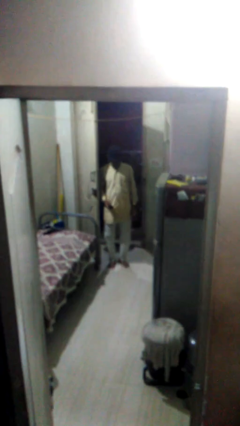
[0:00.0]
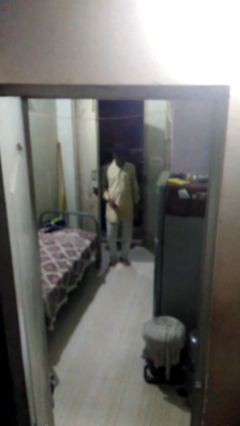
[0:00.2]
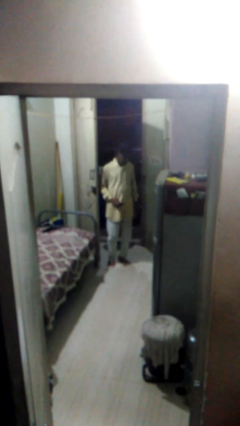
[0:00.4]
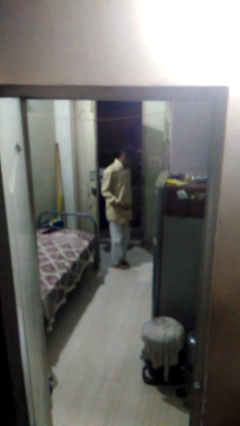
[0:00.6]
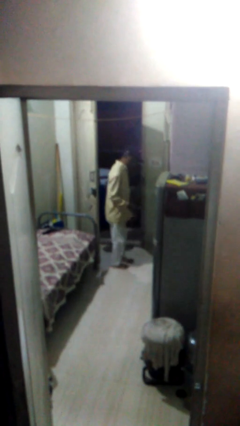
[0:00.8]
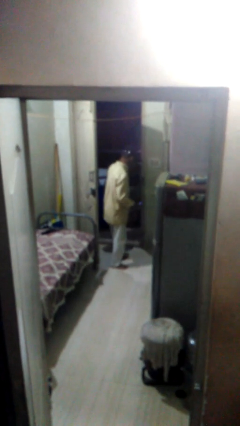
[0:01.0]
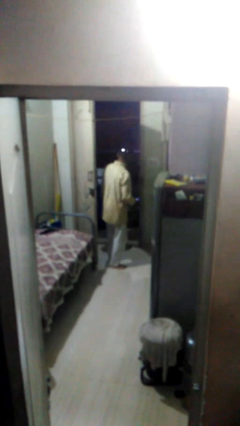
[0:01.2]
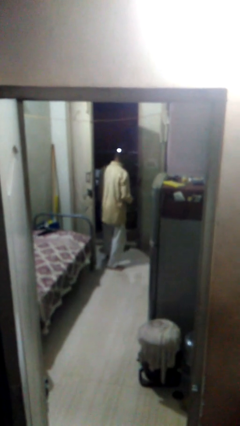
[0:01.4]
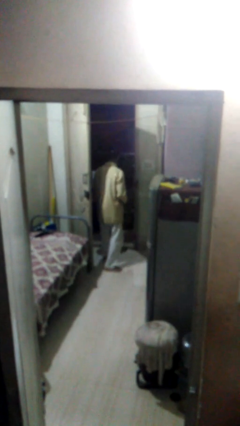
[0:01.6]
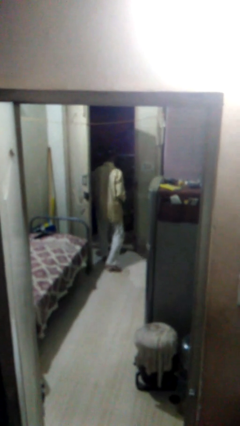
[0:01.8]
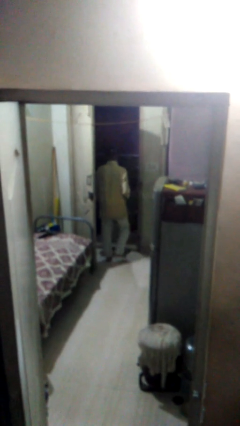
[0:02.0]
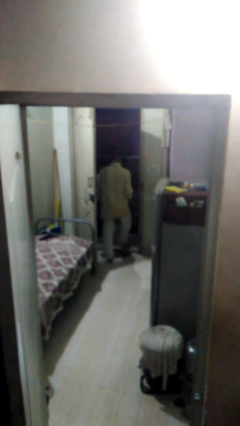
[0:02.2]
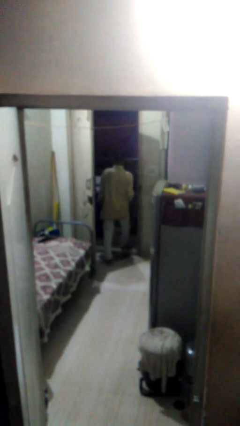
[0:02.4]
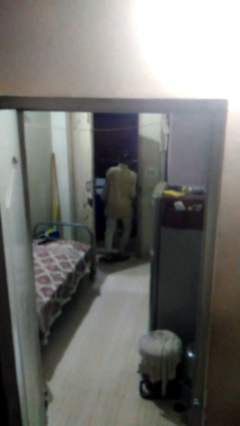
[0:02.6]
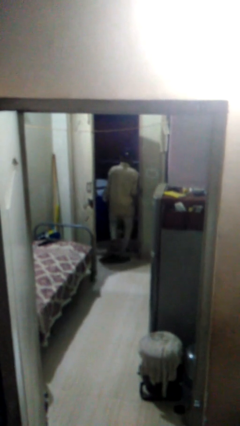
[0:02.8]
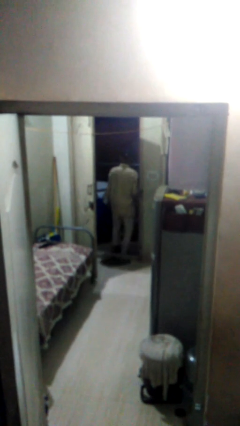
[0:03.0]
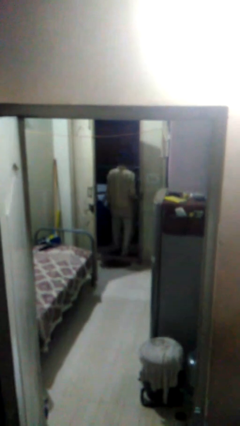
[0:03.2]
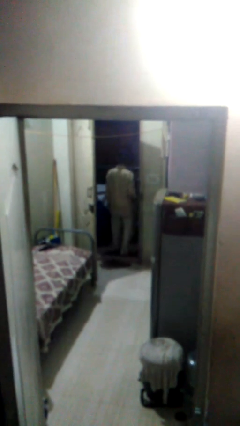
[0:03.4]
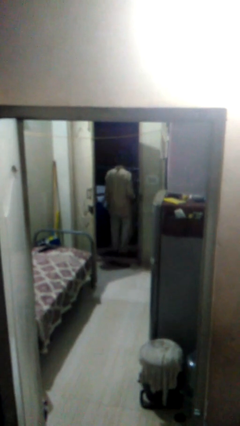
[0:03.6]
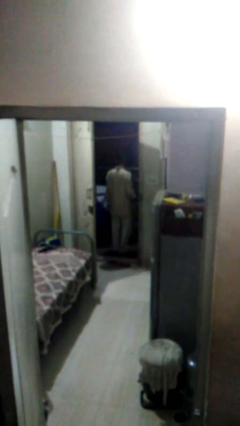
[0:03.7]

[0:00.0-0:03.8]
person exits scene through structure

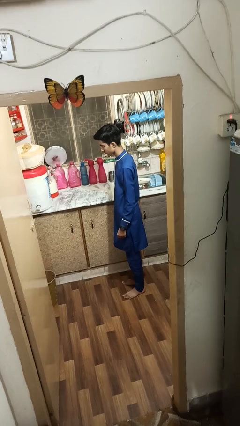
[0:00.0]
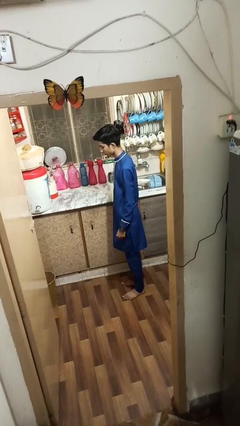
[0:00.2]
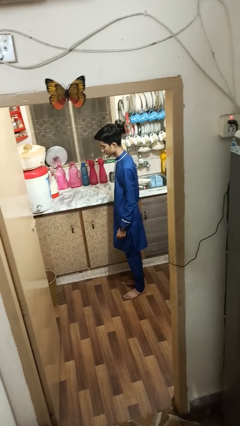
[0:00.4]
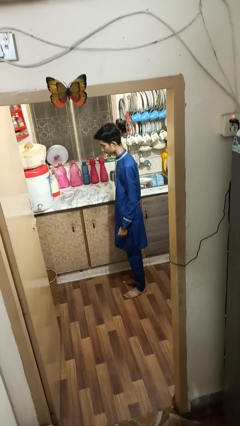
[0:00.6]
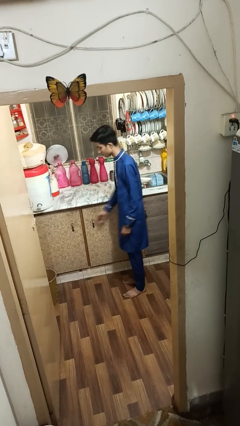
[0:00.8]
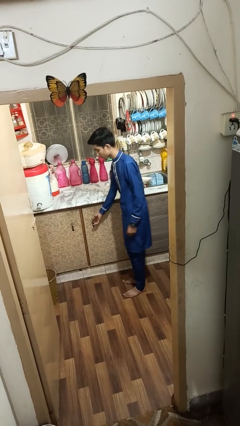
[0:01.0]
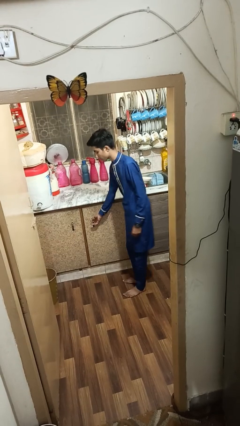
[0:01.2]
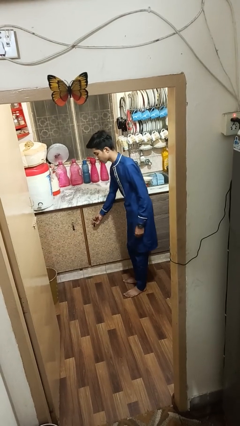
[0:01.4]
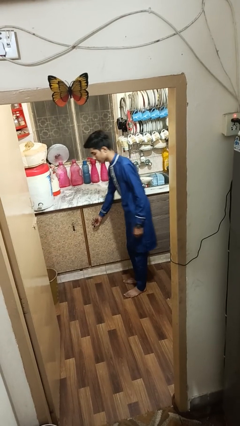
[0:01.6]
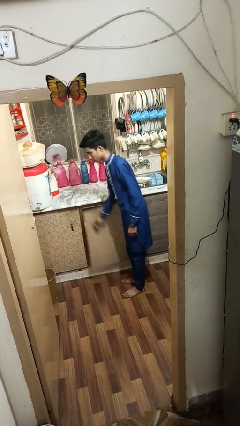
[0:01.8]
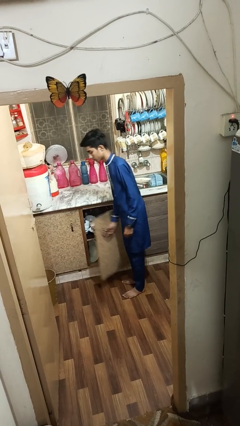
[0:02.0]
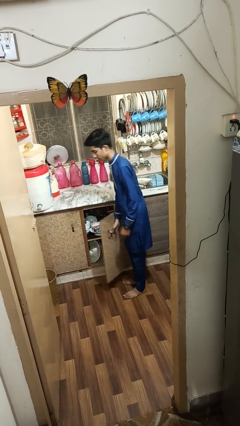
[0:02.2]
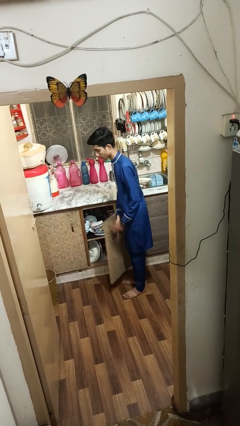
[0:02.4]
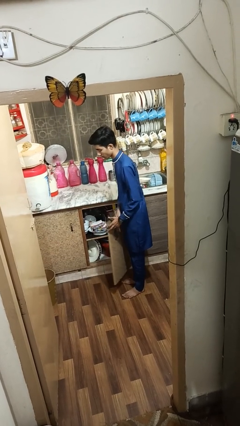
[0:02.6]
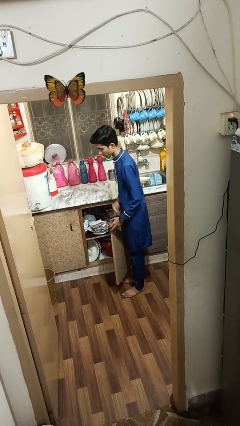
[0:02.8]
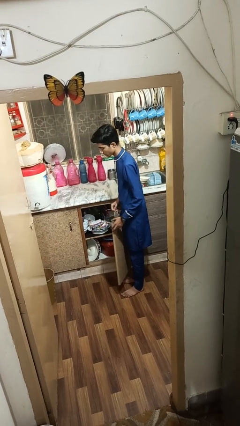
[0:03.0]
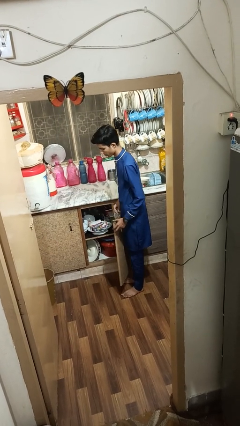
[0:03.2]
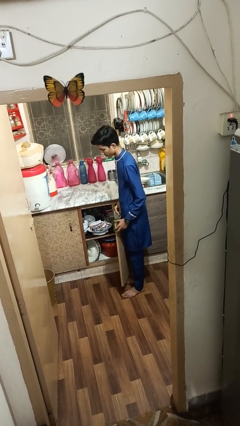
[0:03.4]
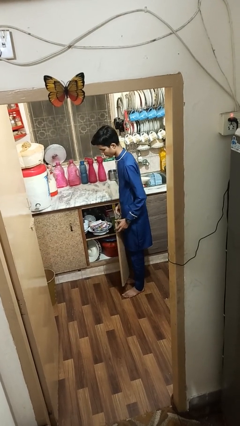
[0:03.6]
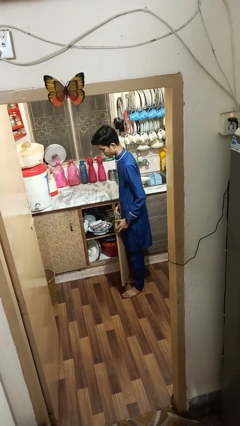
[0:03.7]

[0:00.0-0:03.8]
person opens cabinet

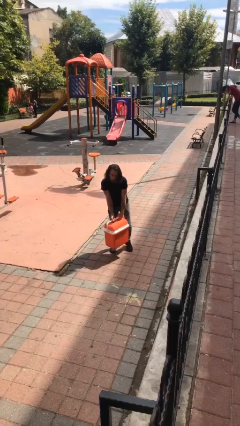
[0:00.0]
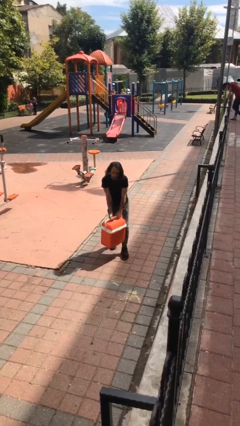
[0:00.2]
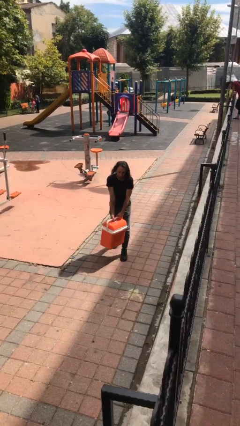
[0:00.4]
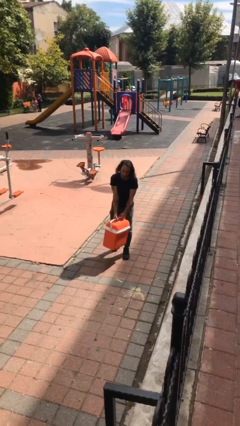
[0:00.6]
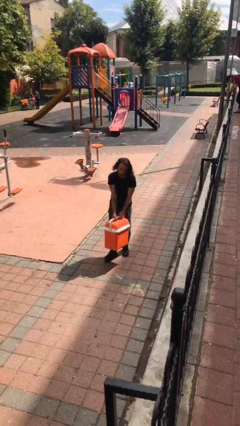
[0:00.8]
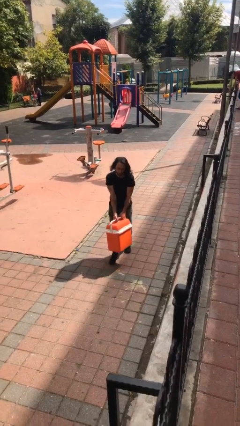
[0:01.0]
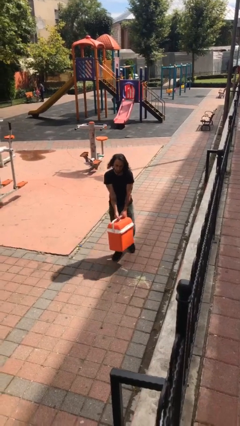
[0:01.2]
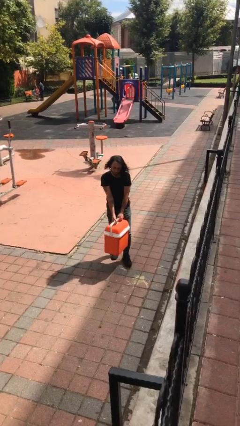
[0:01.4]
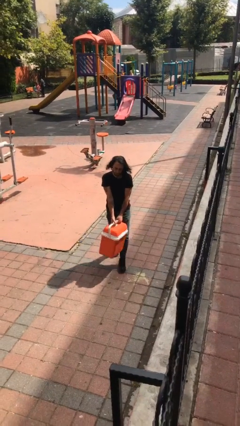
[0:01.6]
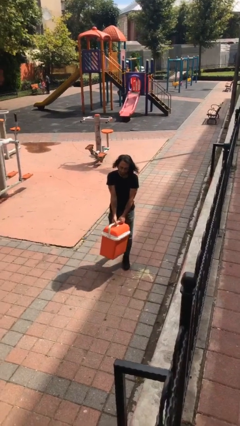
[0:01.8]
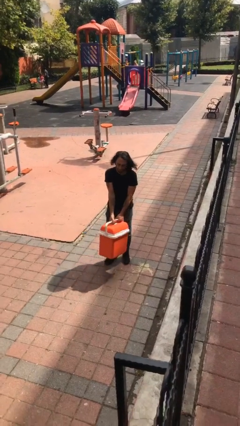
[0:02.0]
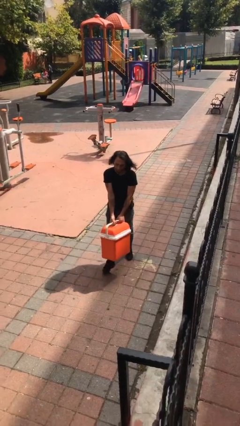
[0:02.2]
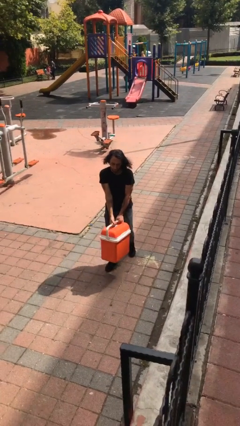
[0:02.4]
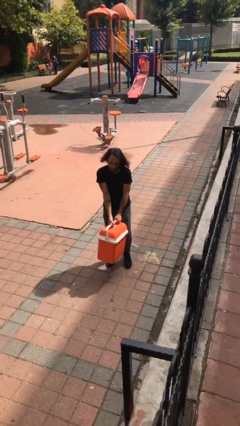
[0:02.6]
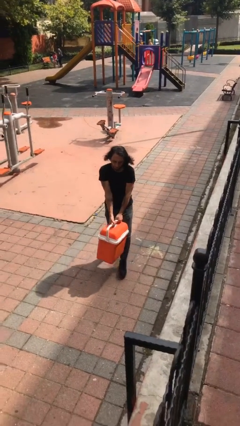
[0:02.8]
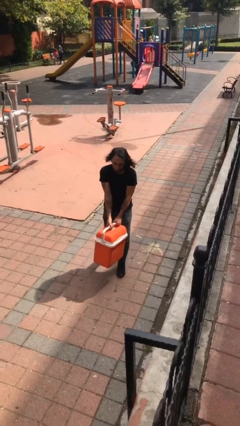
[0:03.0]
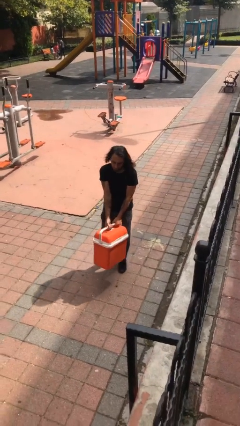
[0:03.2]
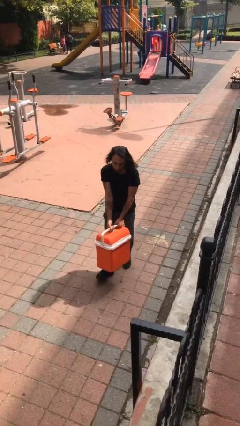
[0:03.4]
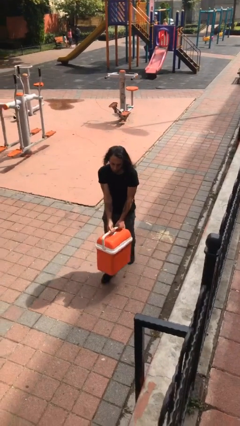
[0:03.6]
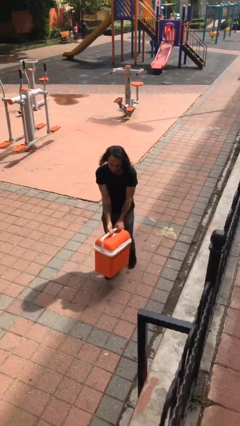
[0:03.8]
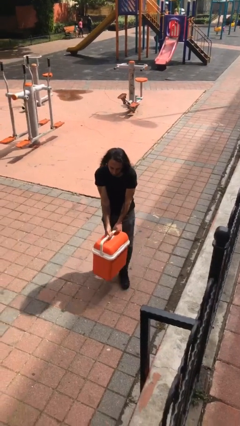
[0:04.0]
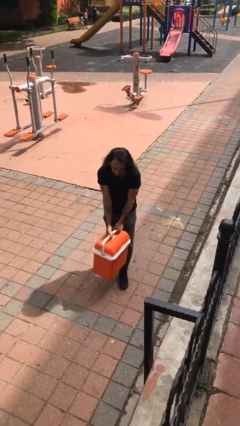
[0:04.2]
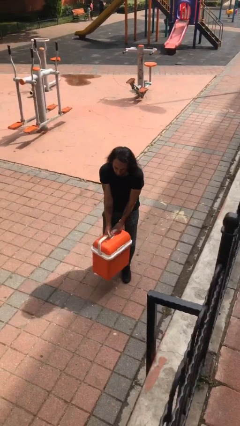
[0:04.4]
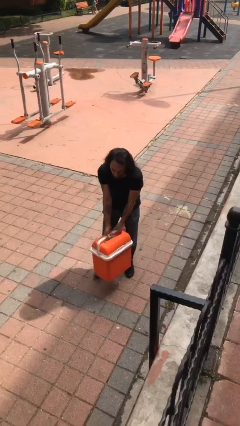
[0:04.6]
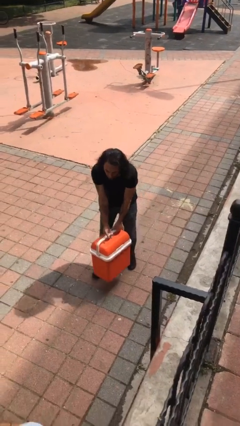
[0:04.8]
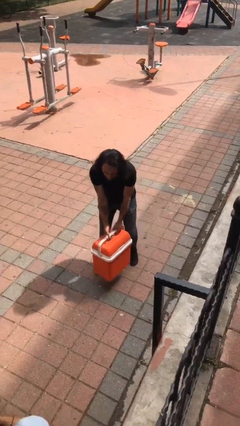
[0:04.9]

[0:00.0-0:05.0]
person carries heavy object

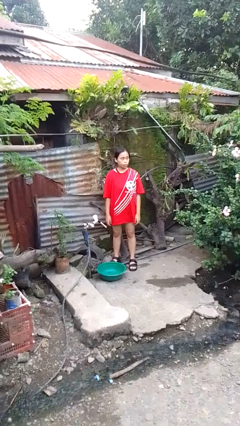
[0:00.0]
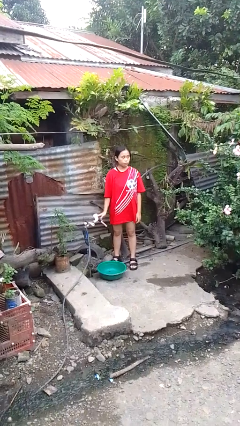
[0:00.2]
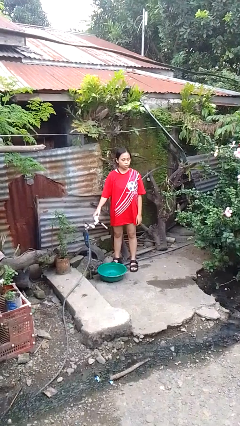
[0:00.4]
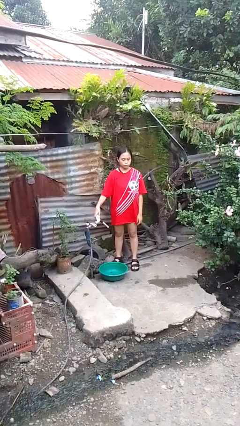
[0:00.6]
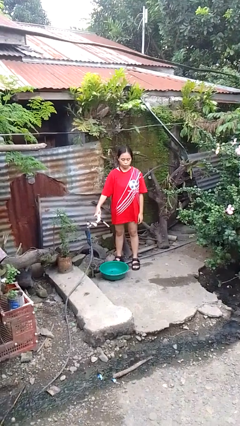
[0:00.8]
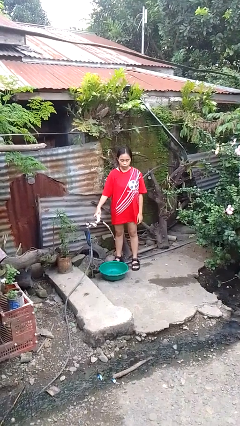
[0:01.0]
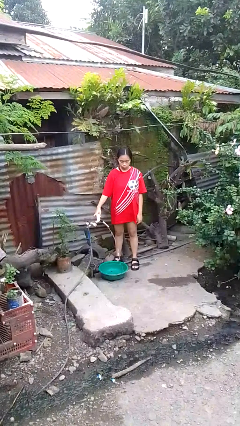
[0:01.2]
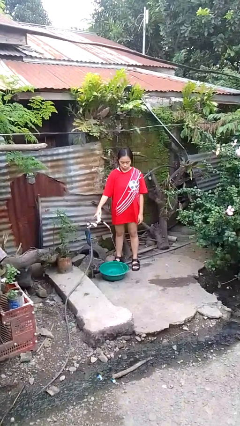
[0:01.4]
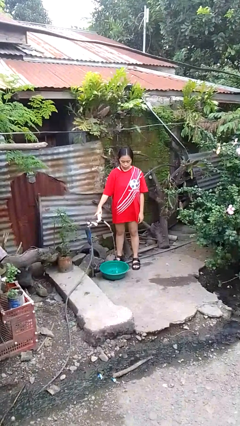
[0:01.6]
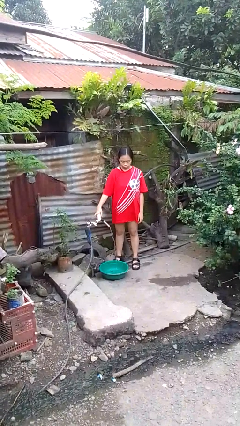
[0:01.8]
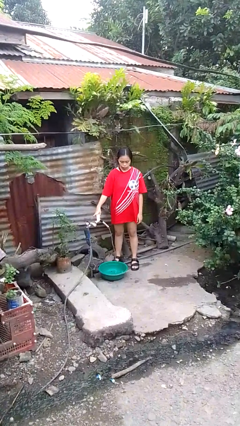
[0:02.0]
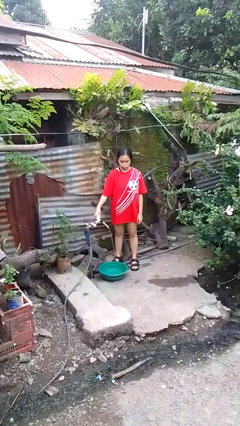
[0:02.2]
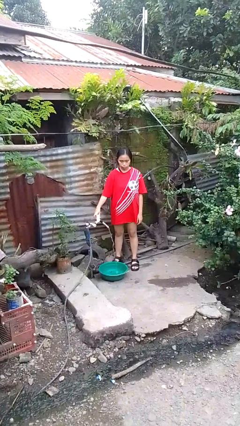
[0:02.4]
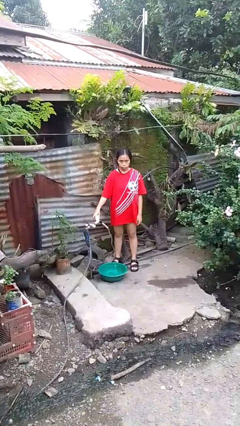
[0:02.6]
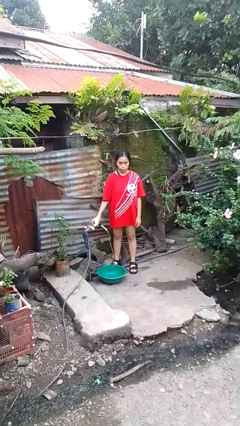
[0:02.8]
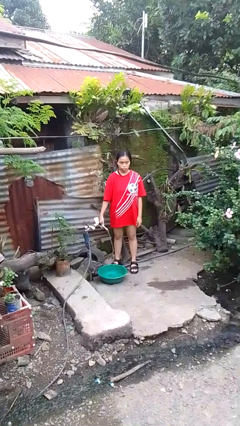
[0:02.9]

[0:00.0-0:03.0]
person turns on faucet

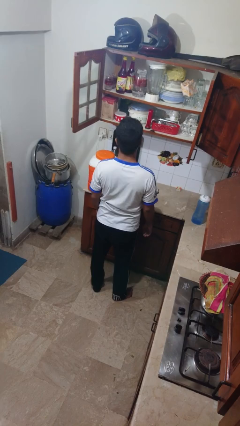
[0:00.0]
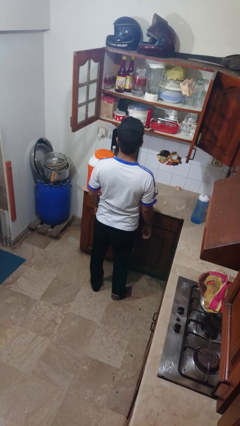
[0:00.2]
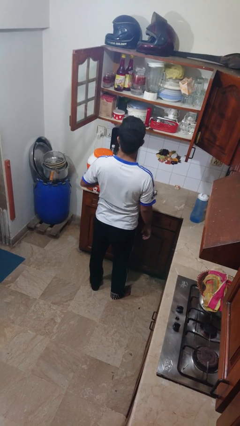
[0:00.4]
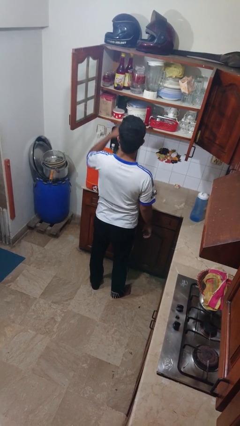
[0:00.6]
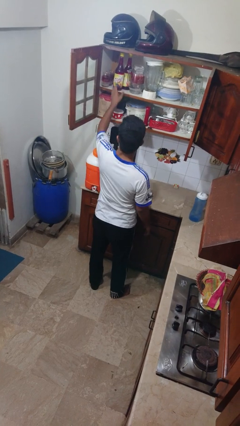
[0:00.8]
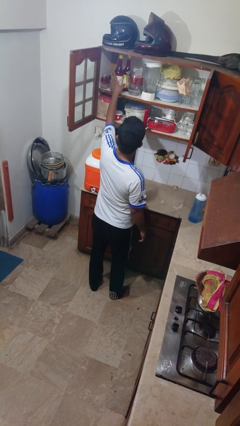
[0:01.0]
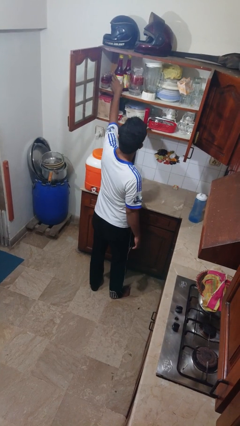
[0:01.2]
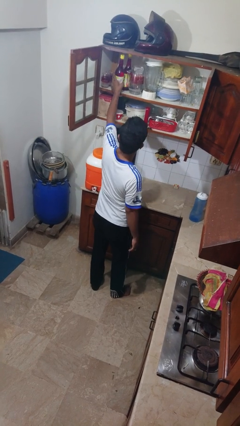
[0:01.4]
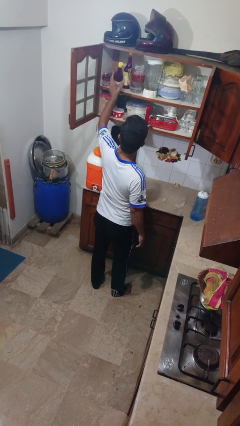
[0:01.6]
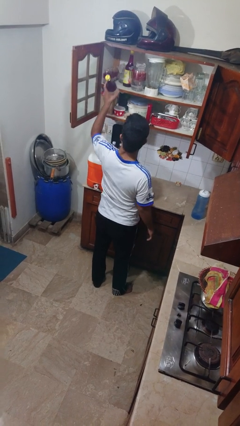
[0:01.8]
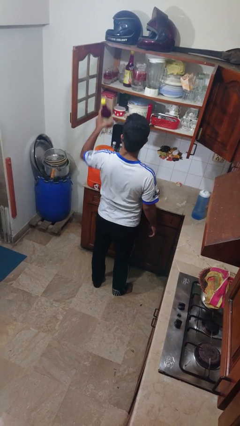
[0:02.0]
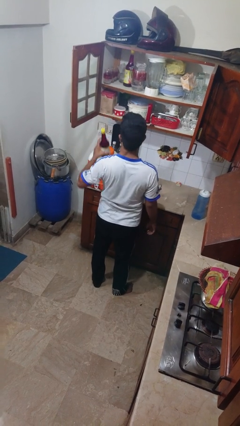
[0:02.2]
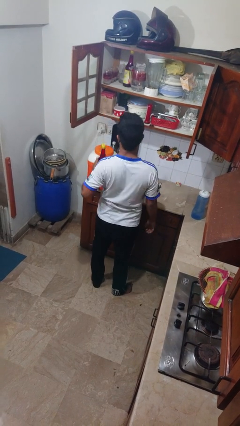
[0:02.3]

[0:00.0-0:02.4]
person picks up object from cabinet
